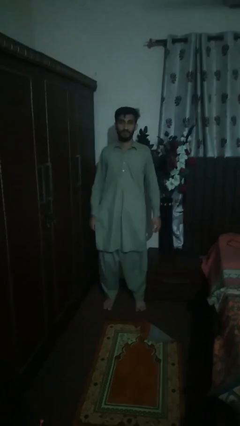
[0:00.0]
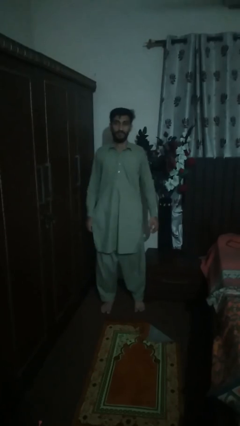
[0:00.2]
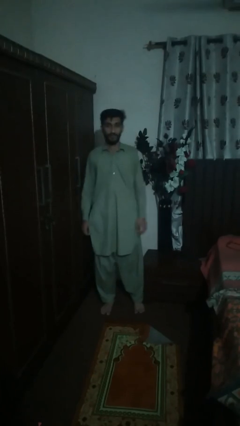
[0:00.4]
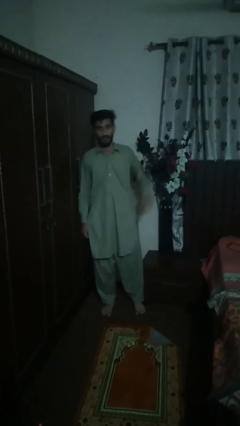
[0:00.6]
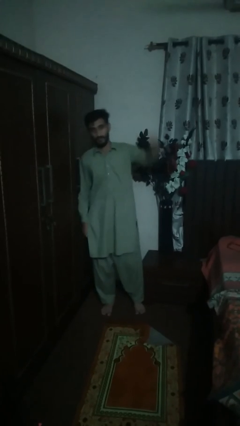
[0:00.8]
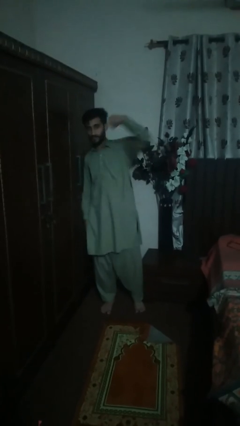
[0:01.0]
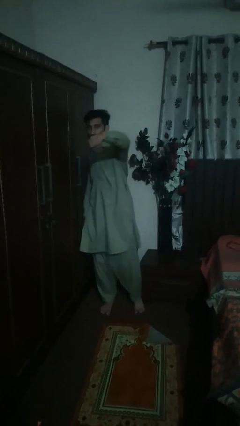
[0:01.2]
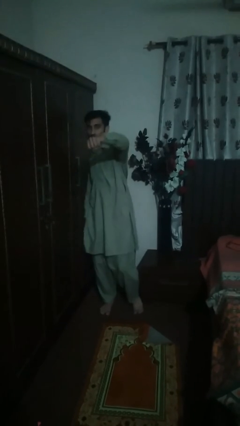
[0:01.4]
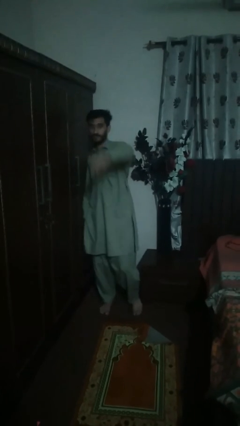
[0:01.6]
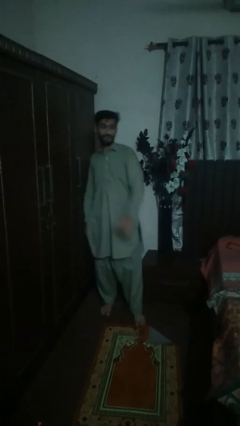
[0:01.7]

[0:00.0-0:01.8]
person karate chop

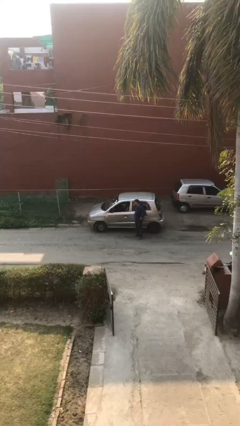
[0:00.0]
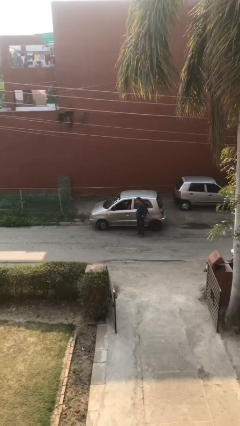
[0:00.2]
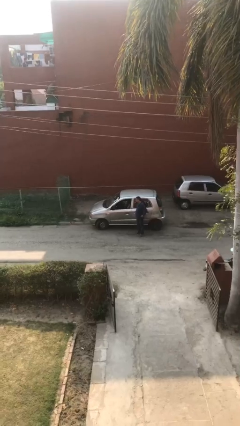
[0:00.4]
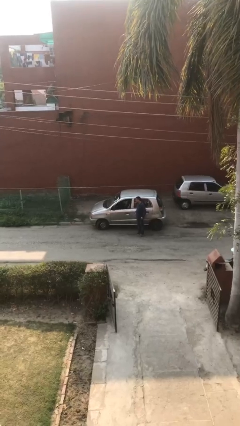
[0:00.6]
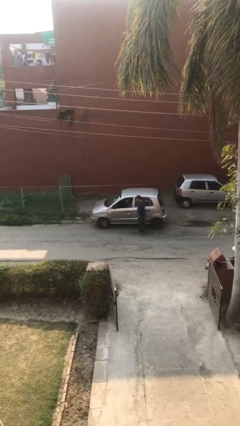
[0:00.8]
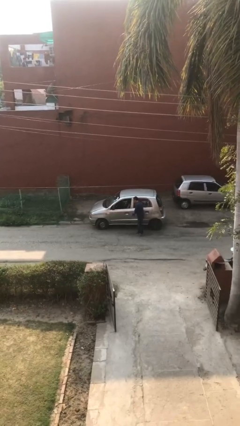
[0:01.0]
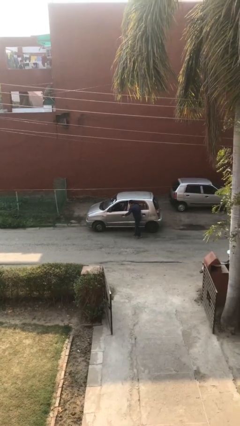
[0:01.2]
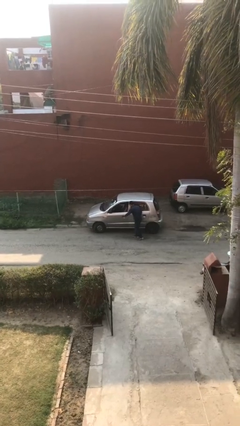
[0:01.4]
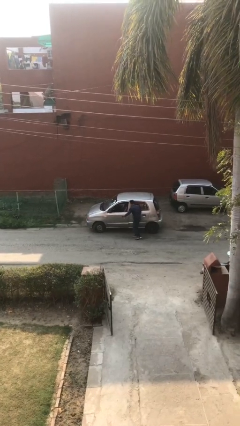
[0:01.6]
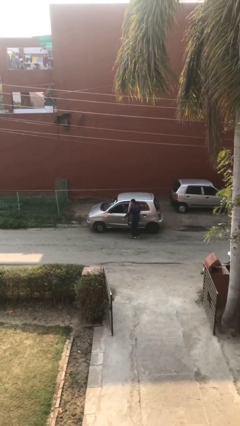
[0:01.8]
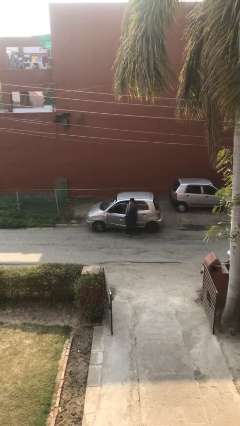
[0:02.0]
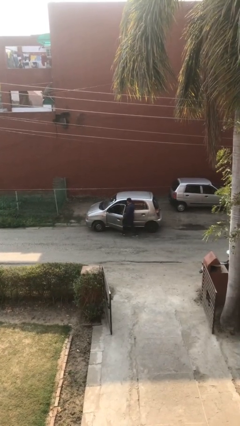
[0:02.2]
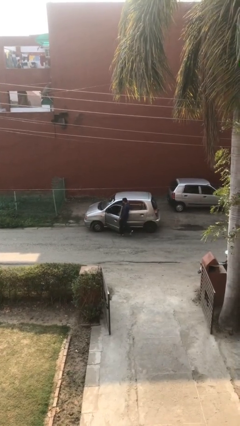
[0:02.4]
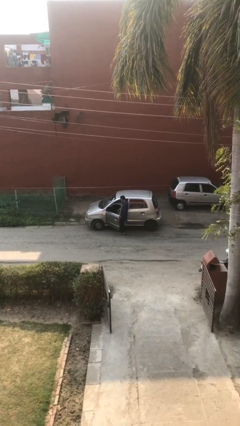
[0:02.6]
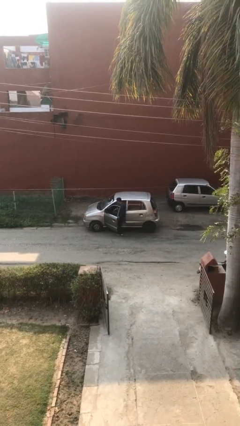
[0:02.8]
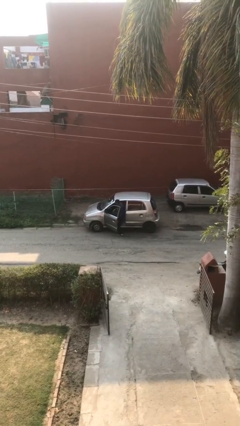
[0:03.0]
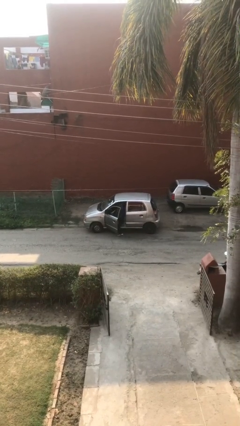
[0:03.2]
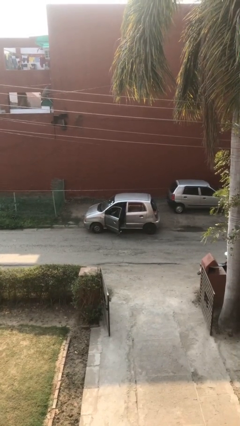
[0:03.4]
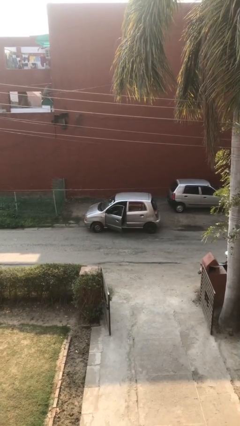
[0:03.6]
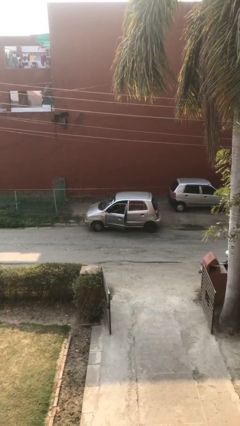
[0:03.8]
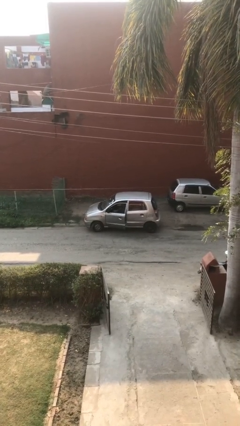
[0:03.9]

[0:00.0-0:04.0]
car picks up person

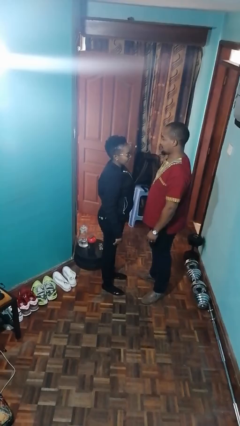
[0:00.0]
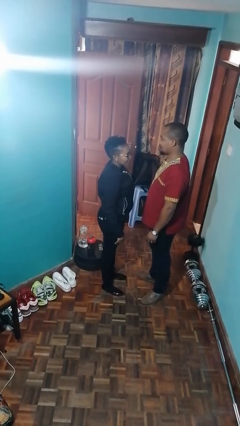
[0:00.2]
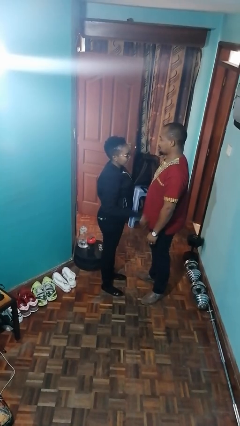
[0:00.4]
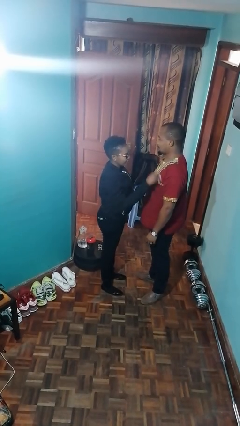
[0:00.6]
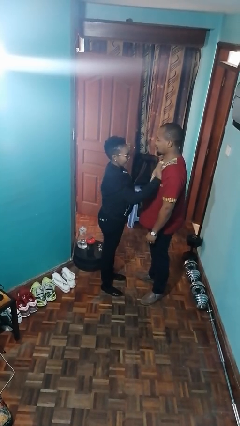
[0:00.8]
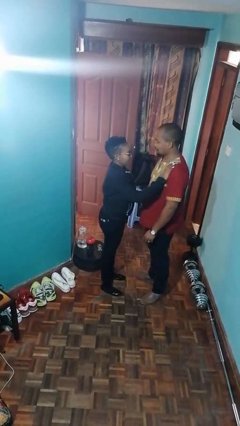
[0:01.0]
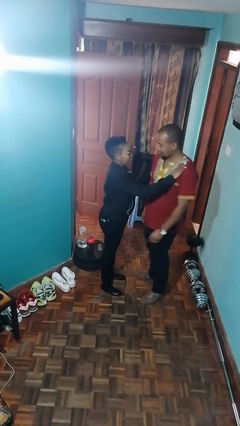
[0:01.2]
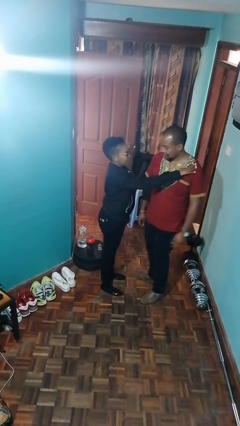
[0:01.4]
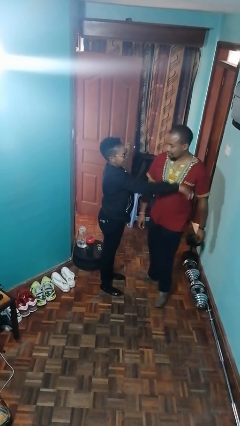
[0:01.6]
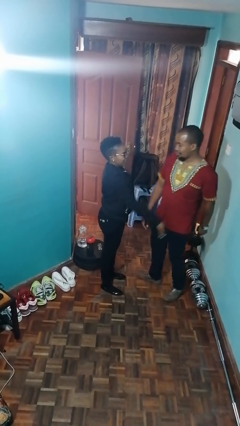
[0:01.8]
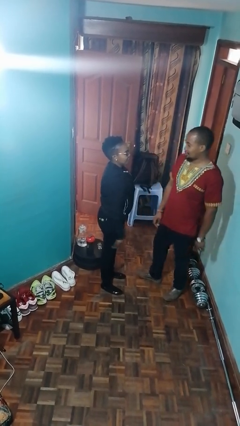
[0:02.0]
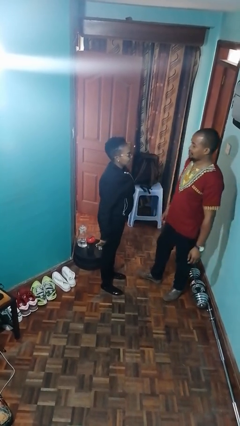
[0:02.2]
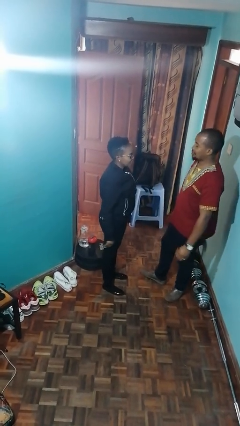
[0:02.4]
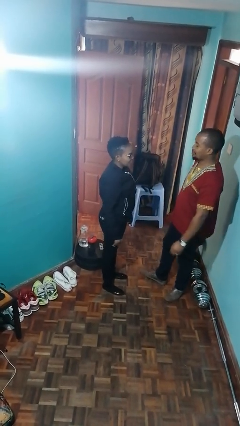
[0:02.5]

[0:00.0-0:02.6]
person shoves person

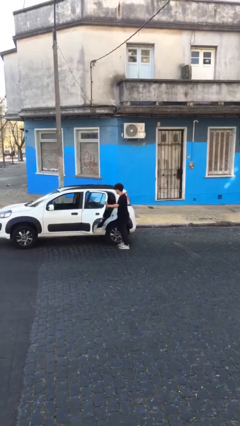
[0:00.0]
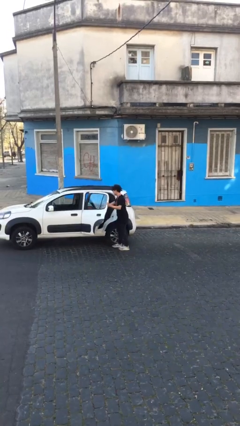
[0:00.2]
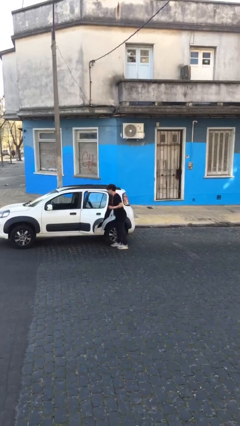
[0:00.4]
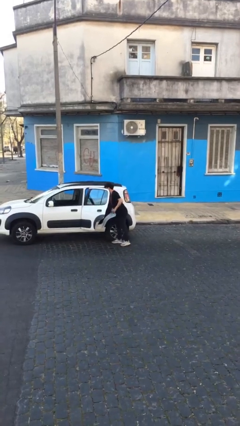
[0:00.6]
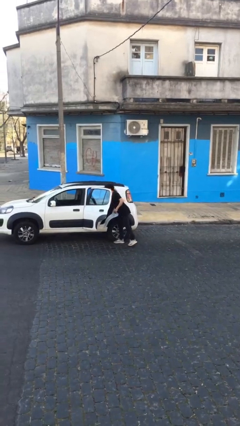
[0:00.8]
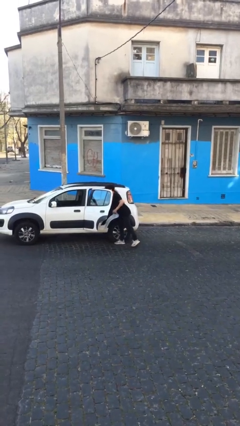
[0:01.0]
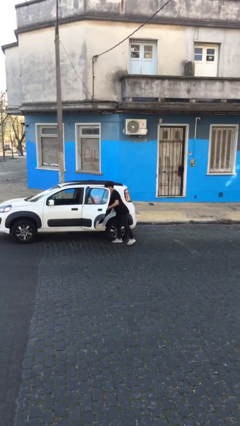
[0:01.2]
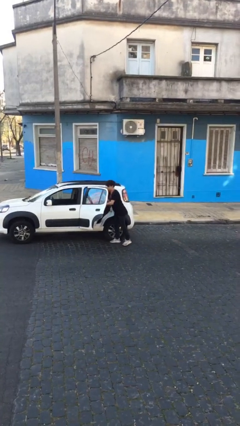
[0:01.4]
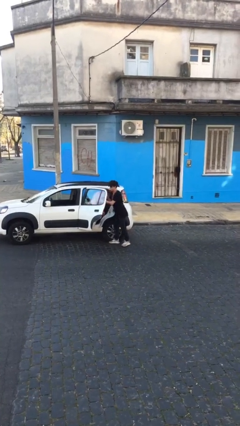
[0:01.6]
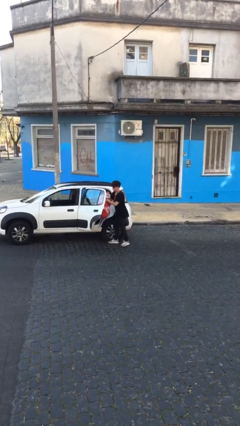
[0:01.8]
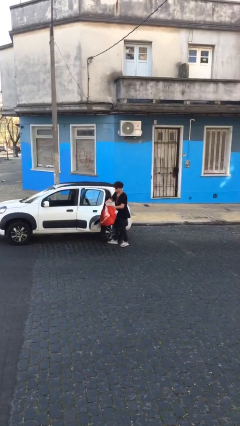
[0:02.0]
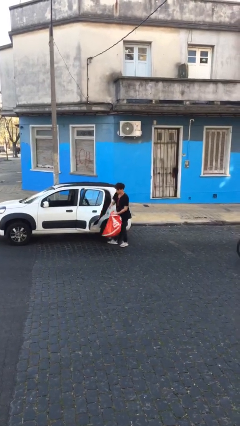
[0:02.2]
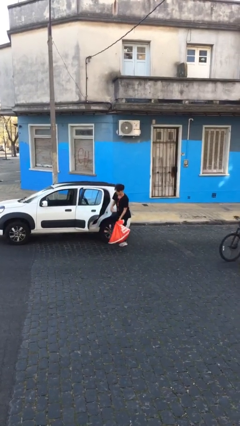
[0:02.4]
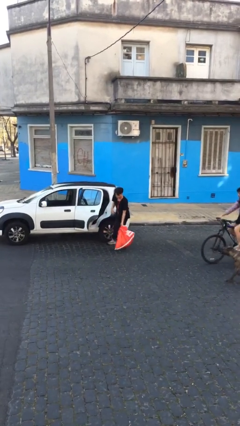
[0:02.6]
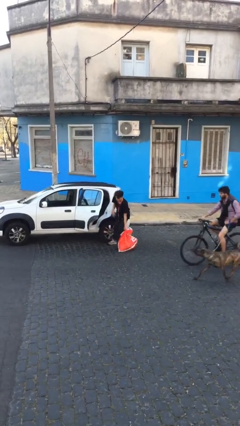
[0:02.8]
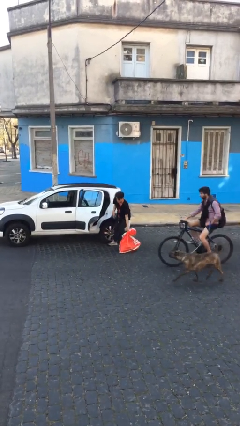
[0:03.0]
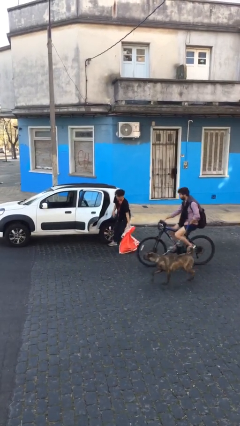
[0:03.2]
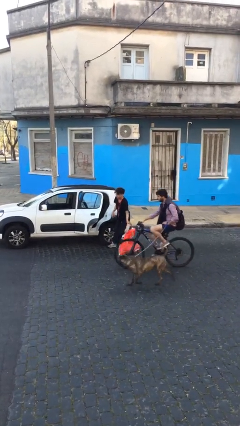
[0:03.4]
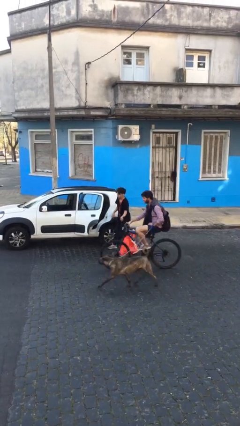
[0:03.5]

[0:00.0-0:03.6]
person unloads car

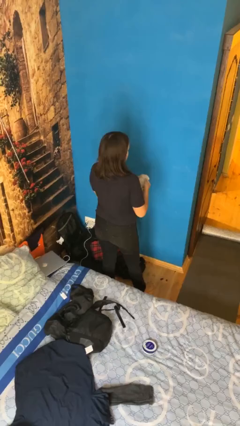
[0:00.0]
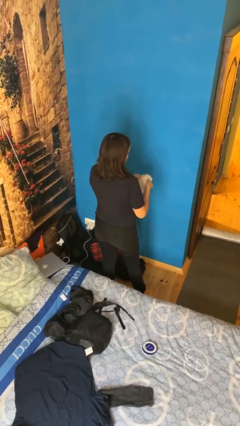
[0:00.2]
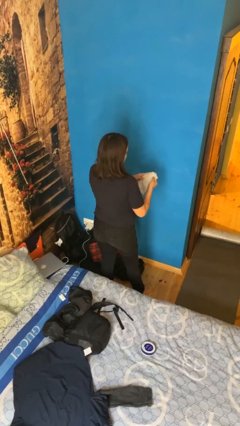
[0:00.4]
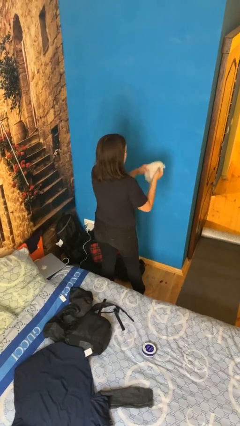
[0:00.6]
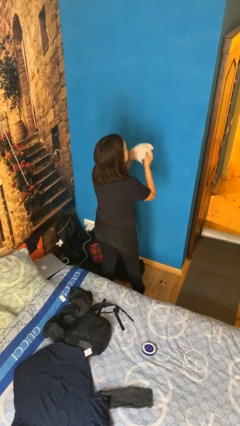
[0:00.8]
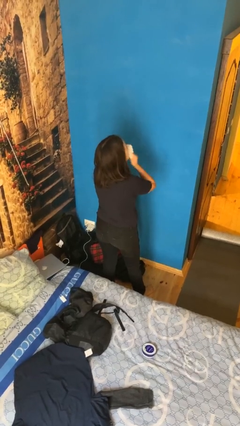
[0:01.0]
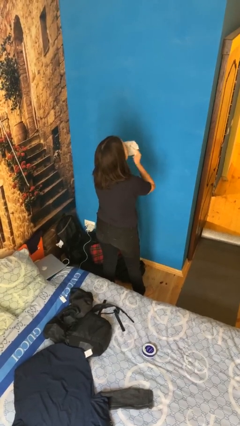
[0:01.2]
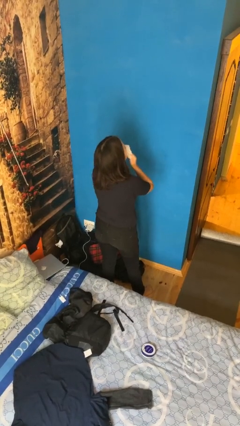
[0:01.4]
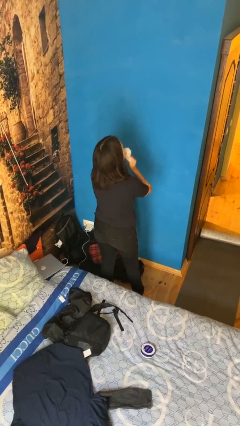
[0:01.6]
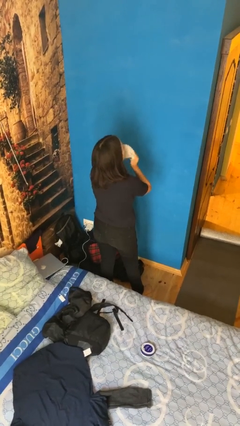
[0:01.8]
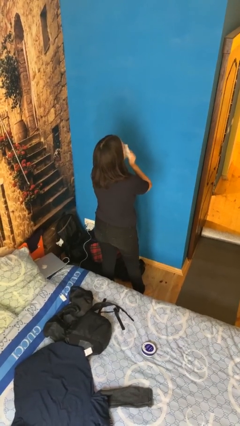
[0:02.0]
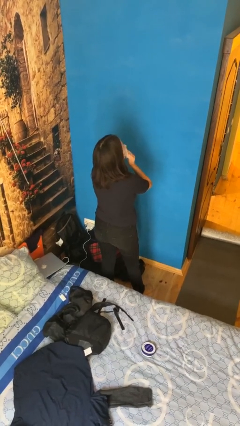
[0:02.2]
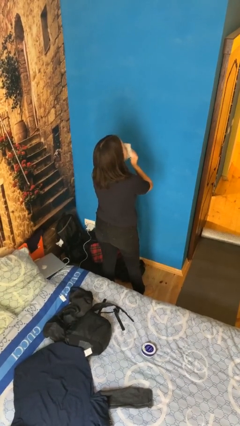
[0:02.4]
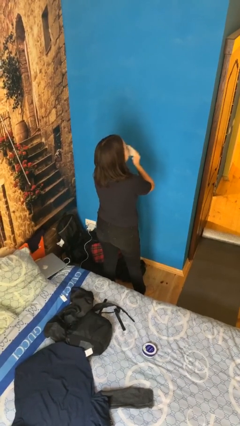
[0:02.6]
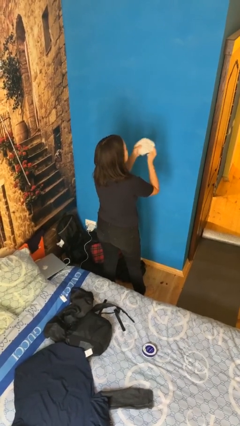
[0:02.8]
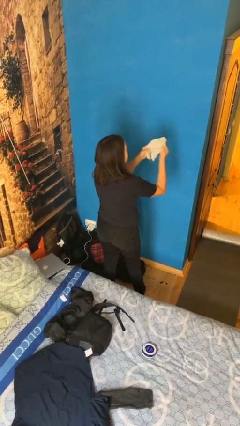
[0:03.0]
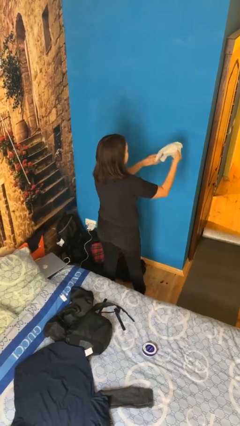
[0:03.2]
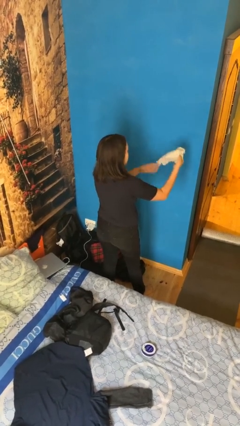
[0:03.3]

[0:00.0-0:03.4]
person wipes mouth with napkin

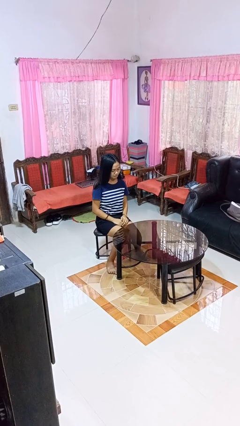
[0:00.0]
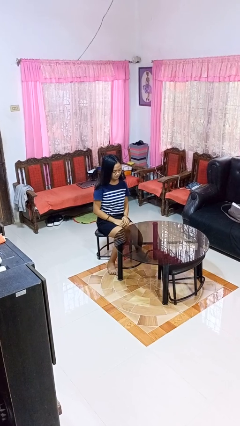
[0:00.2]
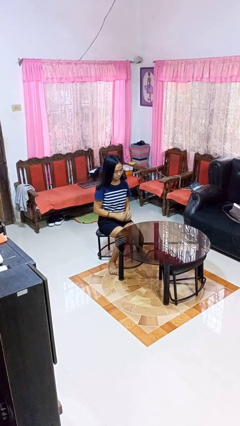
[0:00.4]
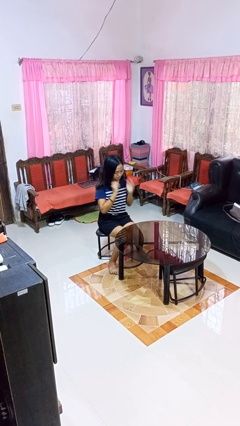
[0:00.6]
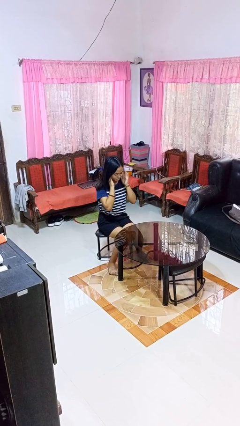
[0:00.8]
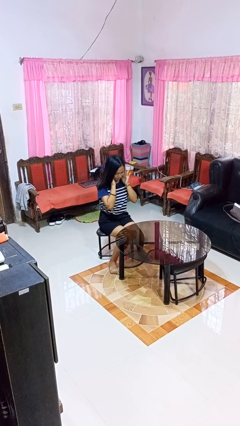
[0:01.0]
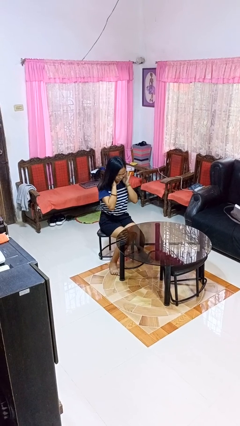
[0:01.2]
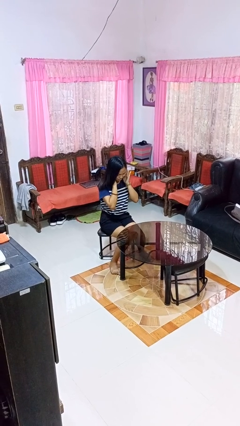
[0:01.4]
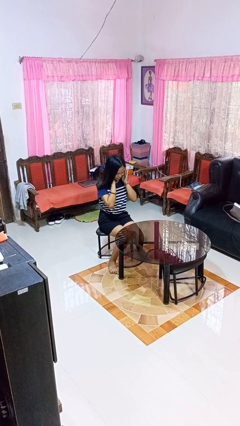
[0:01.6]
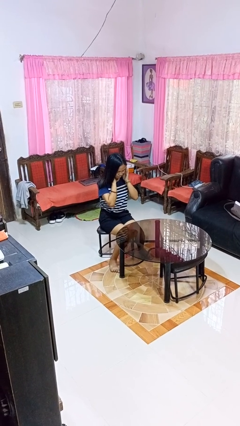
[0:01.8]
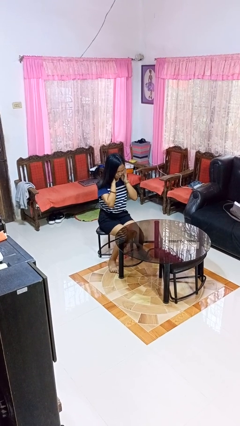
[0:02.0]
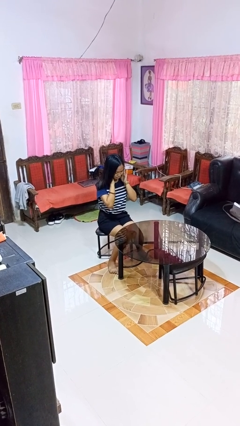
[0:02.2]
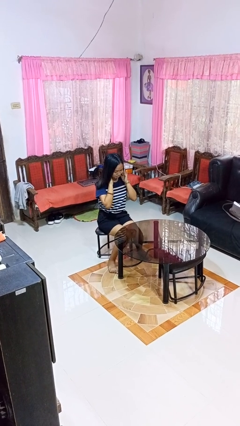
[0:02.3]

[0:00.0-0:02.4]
person puts fingers in ear
